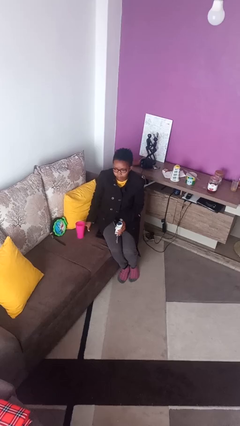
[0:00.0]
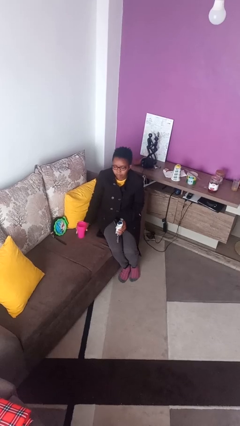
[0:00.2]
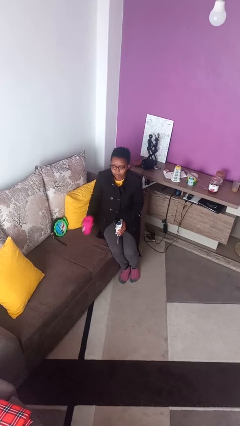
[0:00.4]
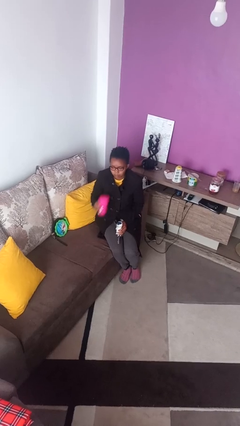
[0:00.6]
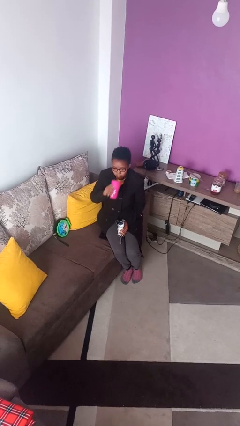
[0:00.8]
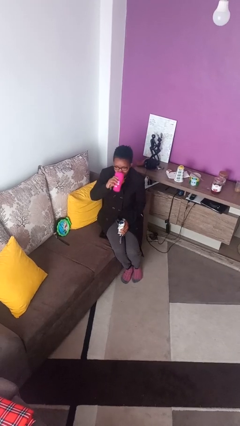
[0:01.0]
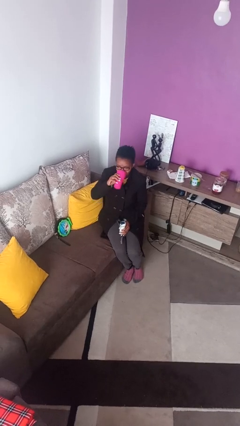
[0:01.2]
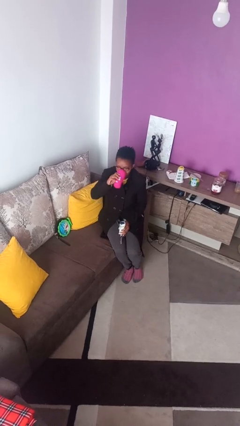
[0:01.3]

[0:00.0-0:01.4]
person drinks from cup

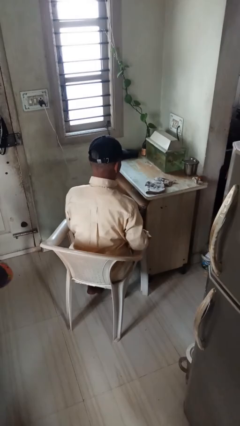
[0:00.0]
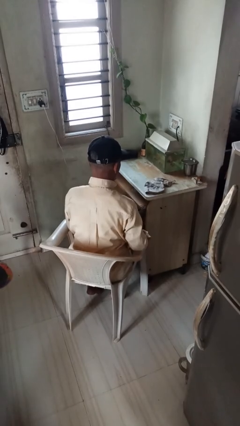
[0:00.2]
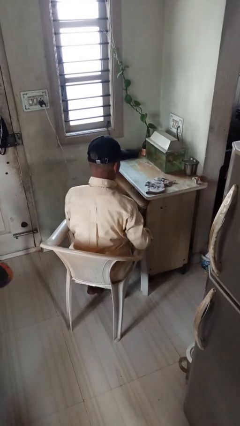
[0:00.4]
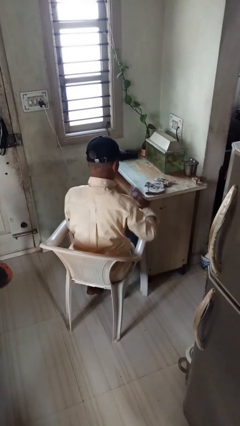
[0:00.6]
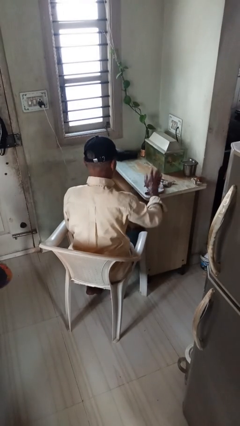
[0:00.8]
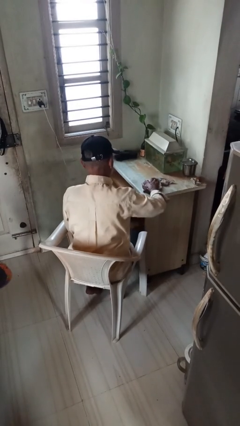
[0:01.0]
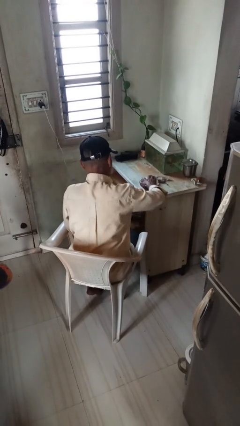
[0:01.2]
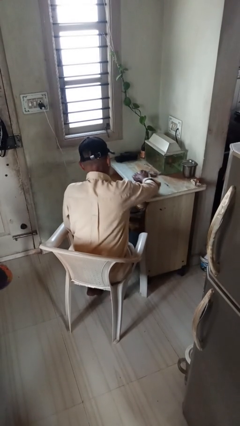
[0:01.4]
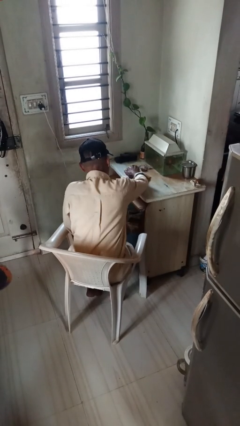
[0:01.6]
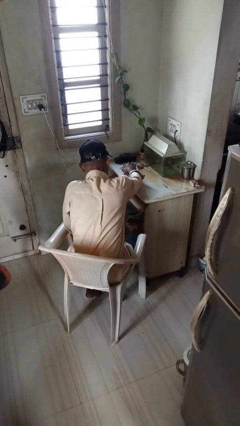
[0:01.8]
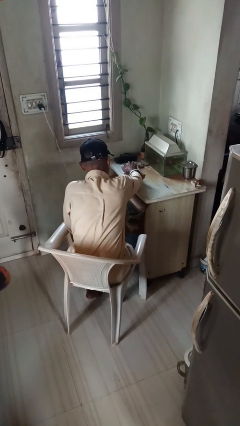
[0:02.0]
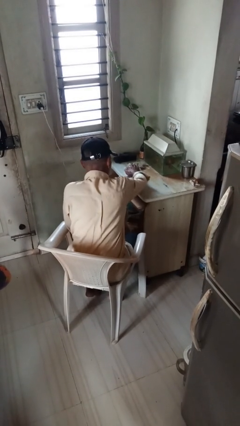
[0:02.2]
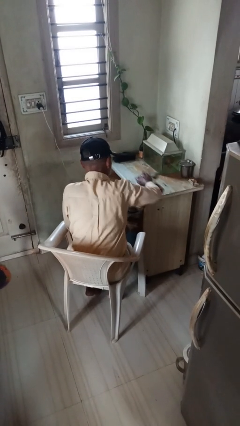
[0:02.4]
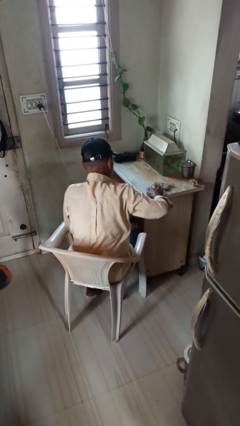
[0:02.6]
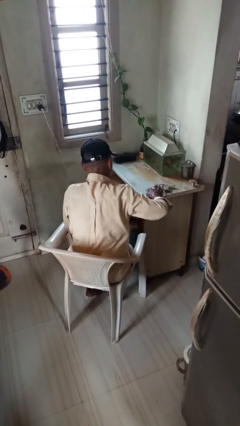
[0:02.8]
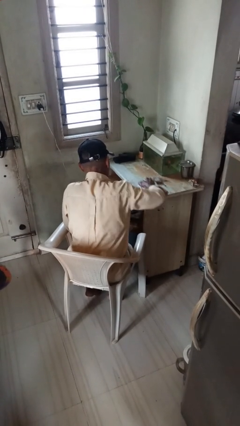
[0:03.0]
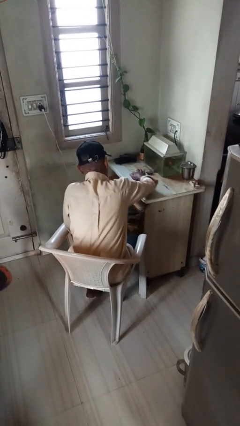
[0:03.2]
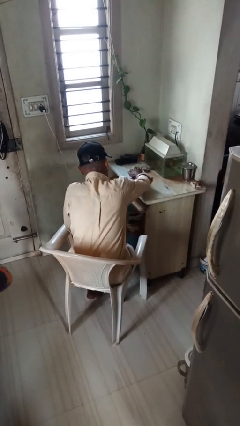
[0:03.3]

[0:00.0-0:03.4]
person cleans table with rag

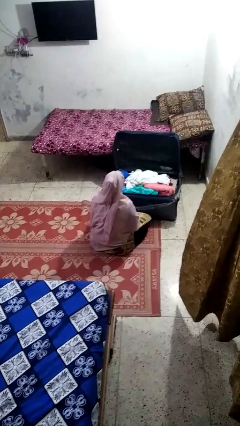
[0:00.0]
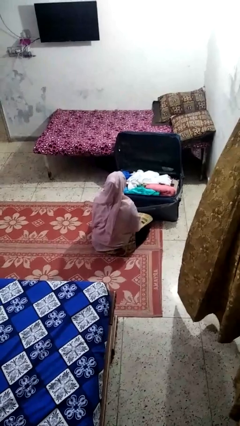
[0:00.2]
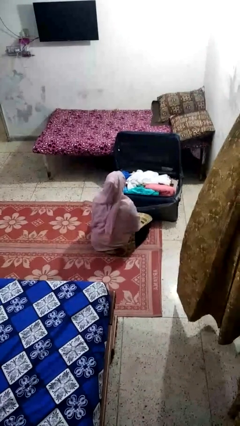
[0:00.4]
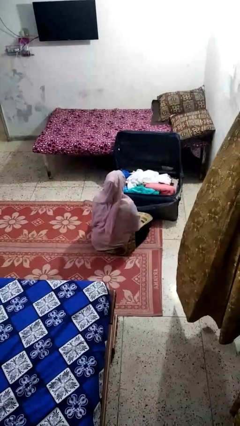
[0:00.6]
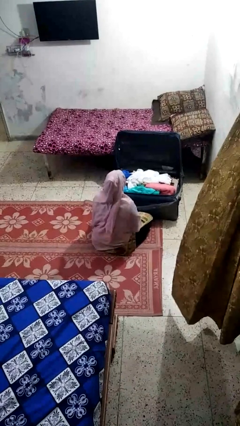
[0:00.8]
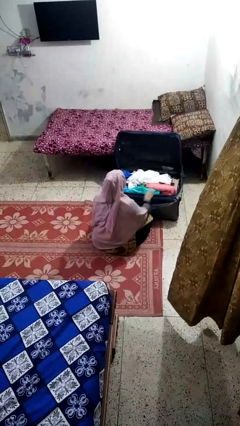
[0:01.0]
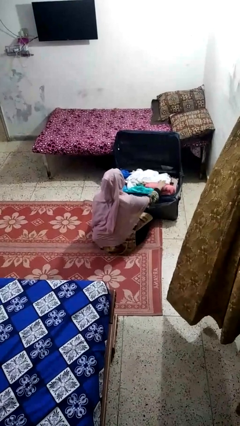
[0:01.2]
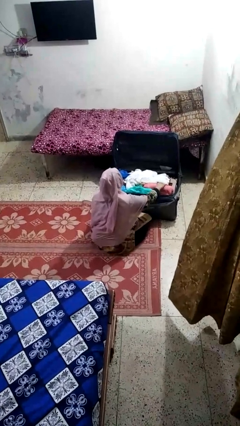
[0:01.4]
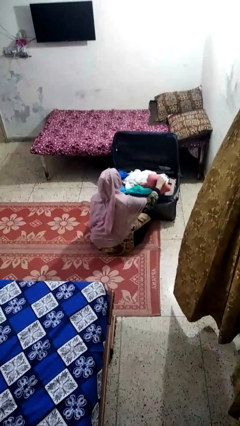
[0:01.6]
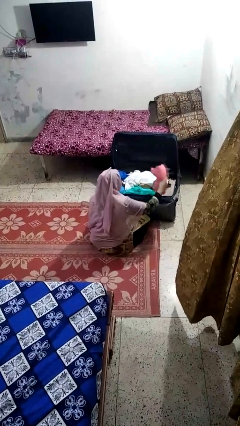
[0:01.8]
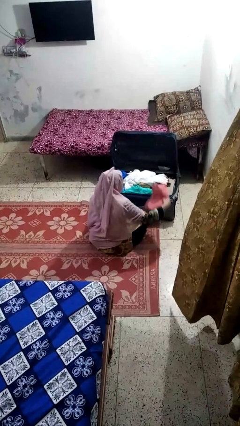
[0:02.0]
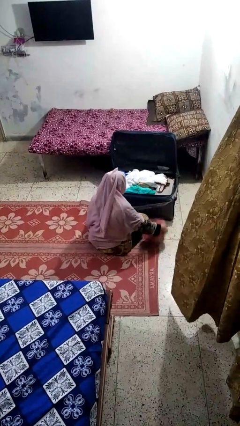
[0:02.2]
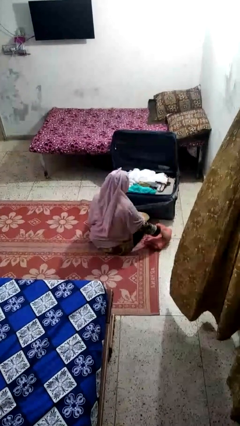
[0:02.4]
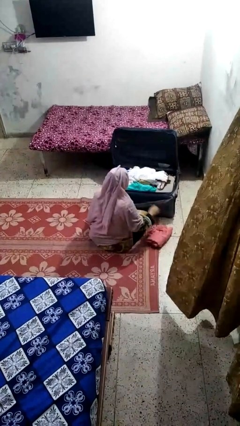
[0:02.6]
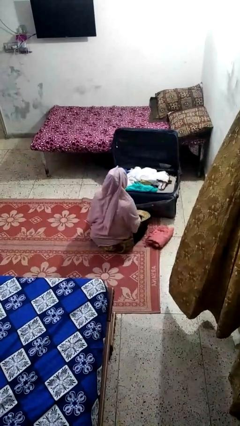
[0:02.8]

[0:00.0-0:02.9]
person unloads clothes from suitcase

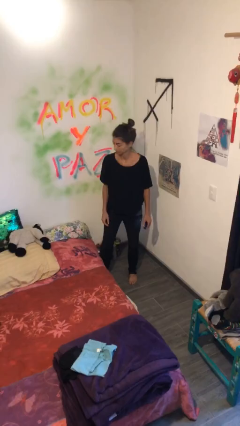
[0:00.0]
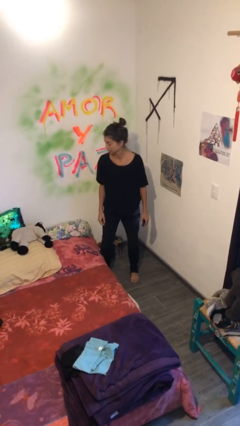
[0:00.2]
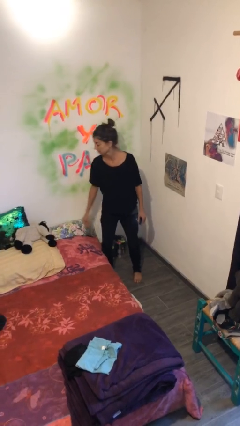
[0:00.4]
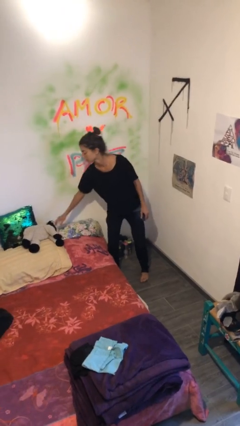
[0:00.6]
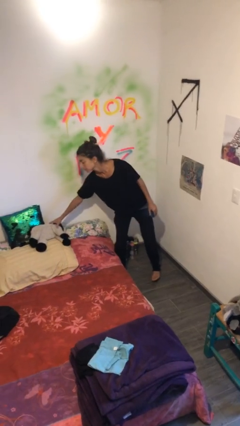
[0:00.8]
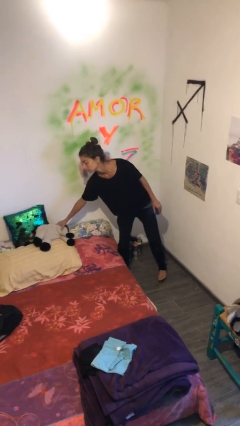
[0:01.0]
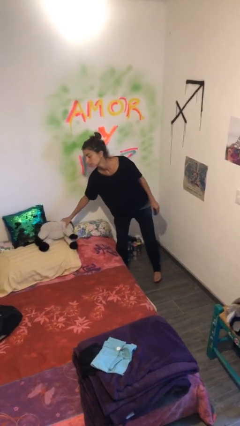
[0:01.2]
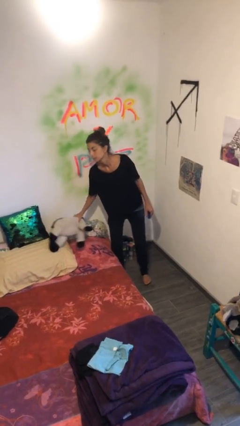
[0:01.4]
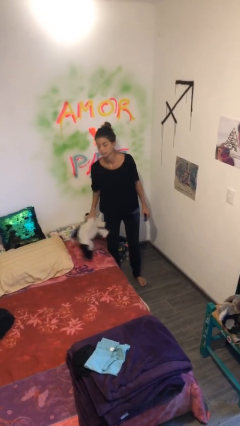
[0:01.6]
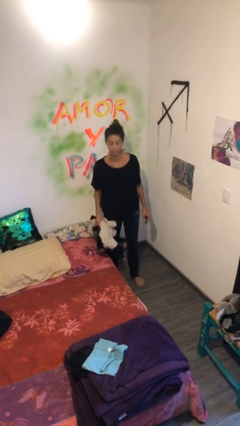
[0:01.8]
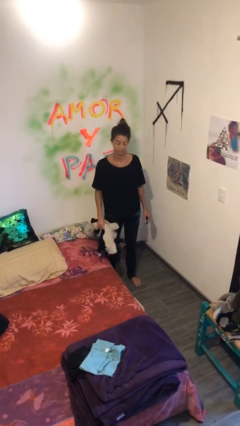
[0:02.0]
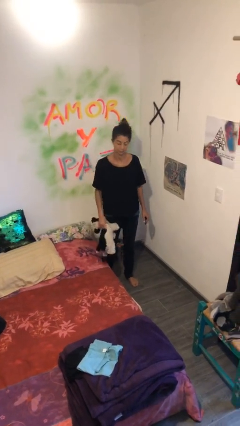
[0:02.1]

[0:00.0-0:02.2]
person picks up object from bed

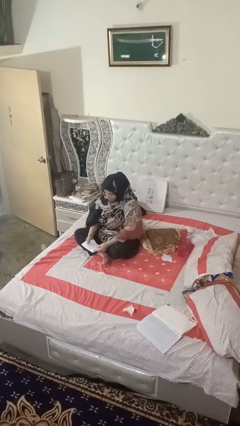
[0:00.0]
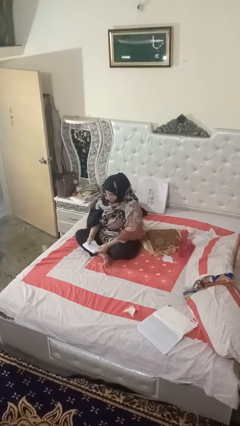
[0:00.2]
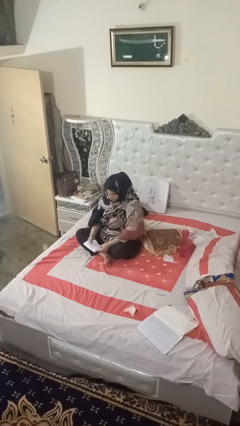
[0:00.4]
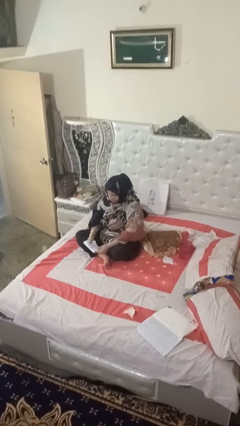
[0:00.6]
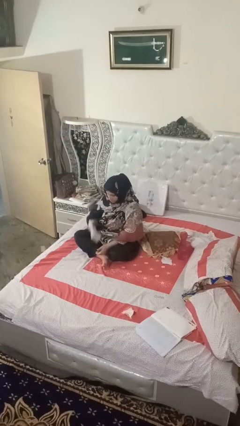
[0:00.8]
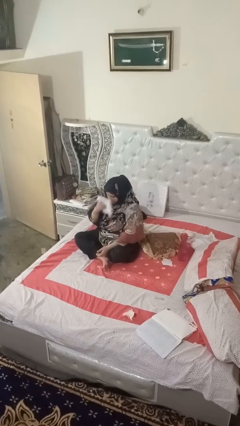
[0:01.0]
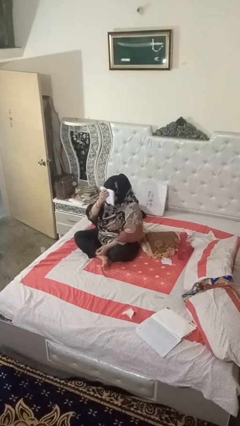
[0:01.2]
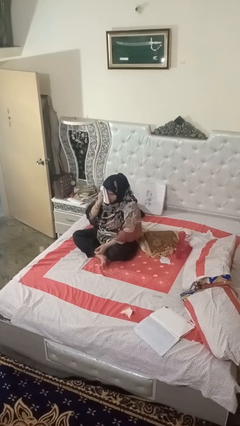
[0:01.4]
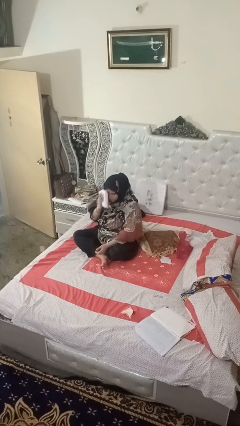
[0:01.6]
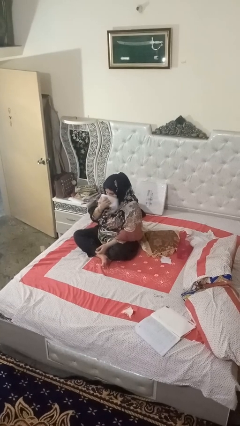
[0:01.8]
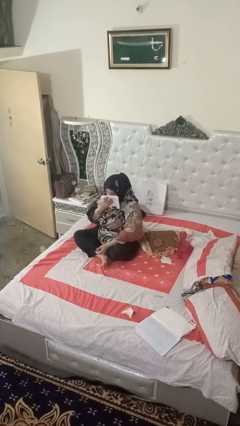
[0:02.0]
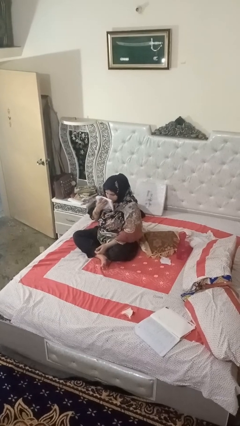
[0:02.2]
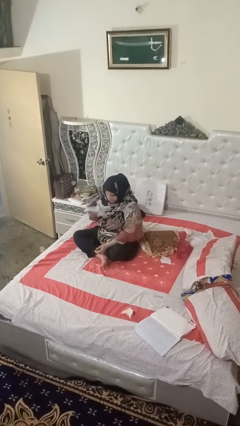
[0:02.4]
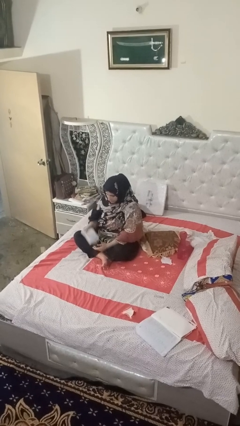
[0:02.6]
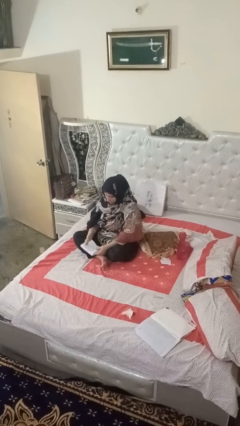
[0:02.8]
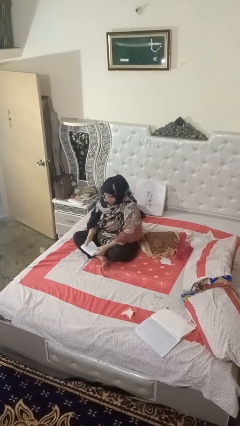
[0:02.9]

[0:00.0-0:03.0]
person wipes mouth with napkin

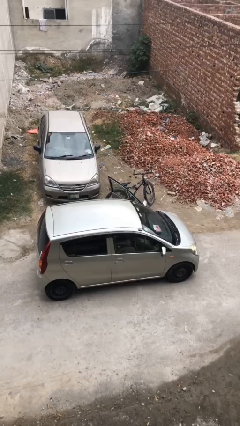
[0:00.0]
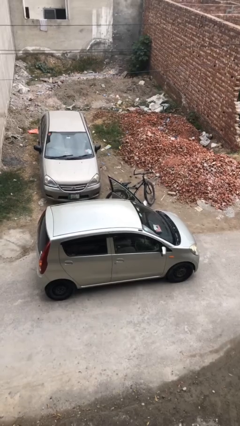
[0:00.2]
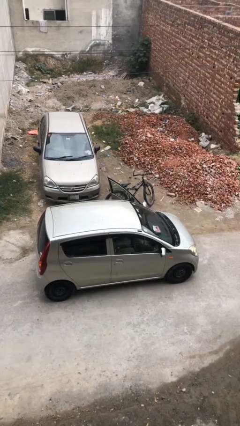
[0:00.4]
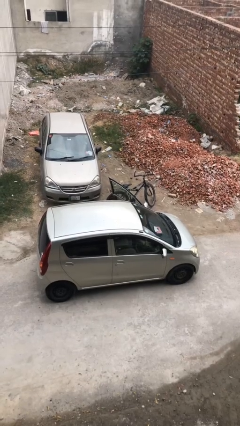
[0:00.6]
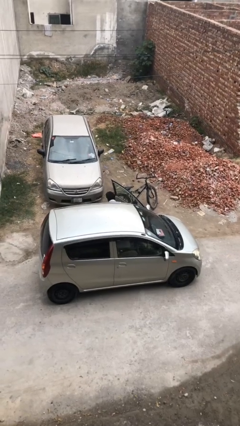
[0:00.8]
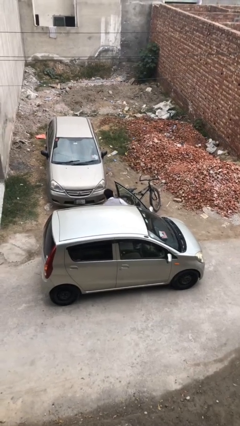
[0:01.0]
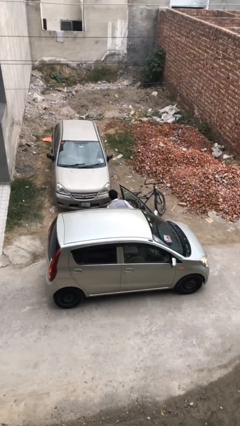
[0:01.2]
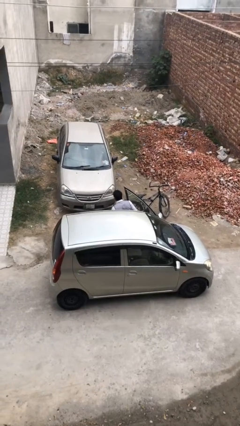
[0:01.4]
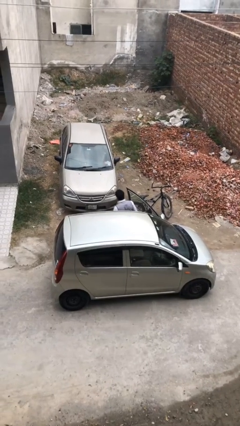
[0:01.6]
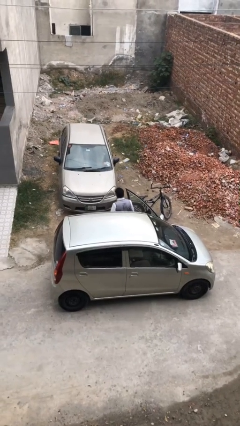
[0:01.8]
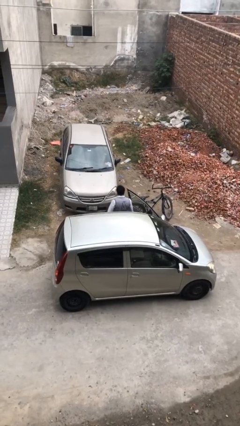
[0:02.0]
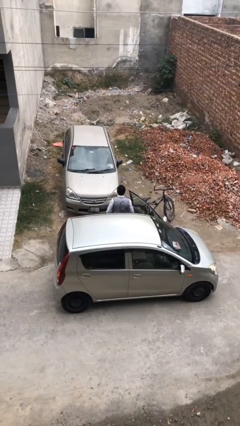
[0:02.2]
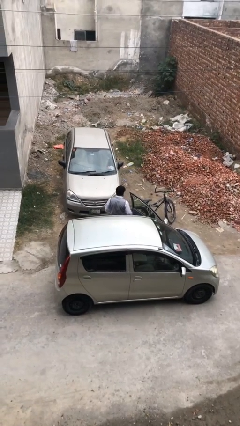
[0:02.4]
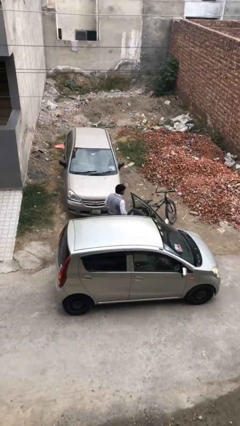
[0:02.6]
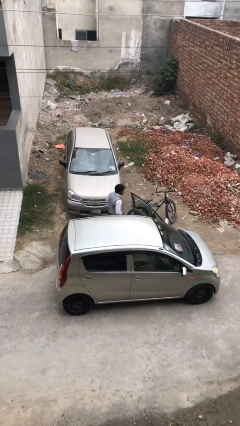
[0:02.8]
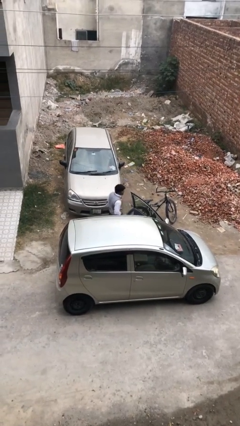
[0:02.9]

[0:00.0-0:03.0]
person exits car

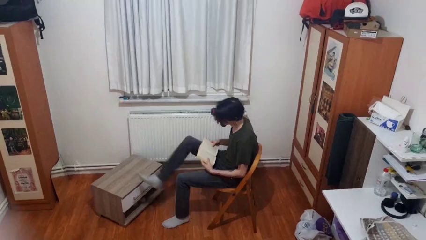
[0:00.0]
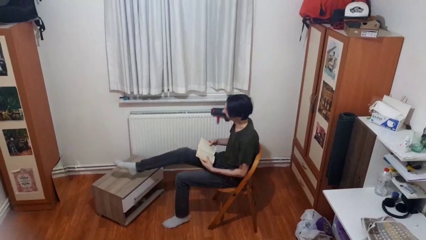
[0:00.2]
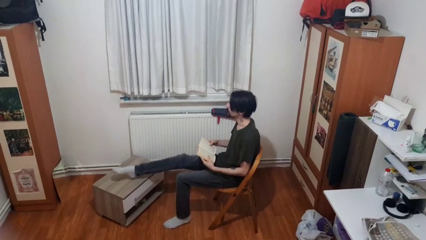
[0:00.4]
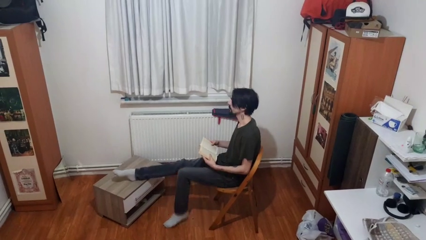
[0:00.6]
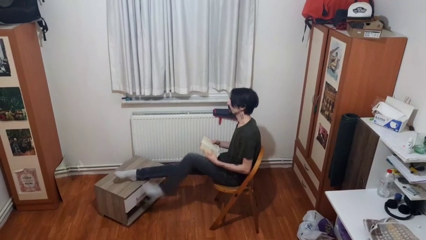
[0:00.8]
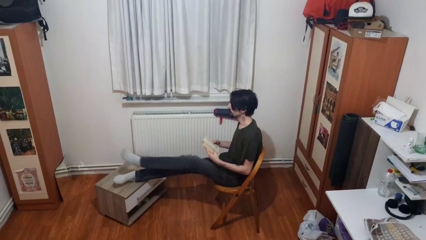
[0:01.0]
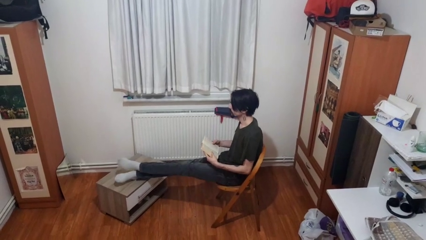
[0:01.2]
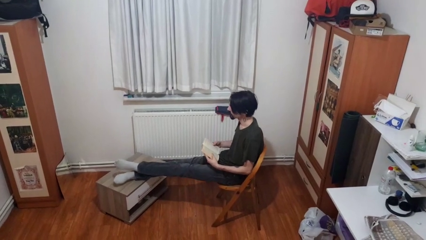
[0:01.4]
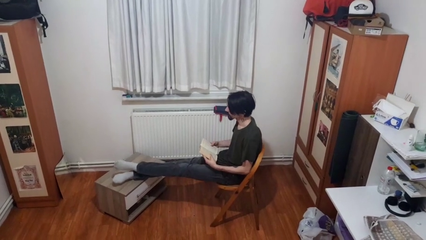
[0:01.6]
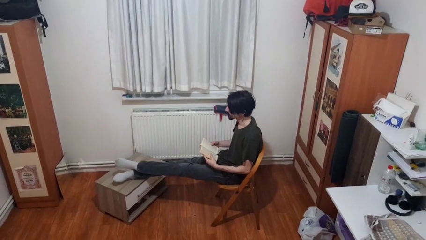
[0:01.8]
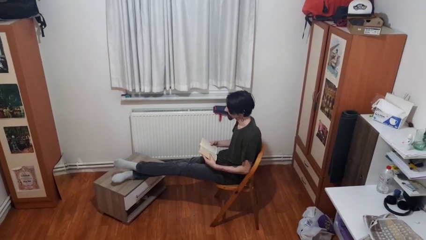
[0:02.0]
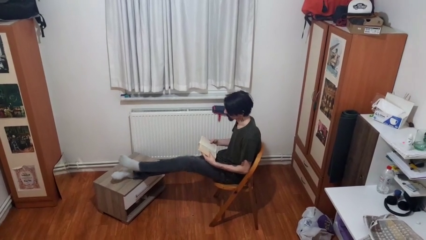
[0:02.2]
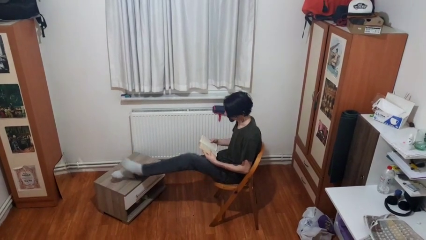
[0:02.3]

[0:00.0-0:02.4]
person puts feet up
